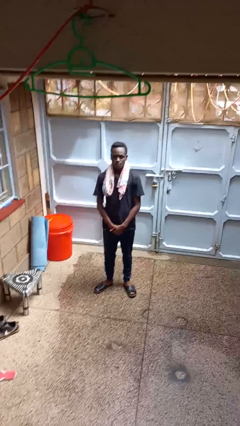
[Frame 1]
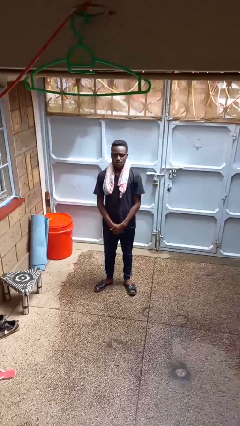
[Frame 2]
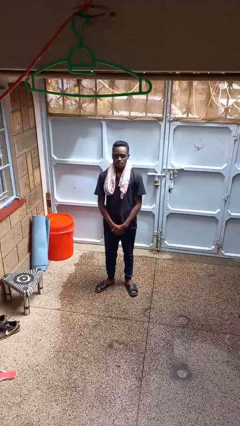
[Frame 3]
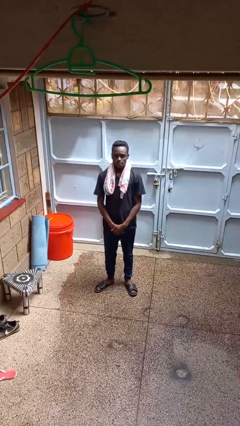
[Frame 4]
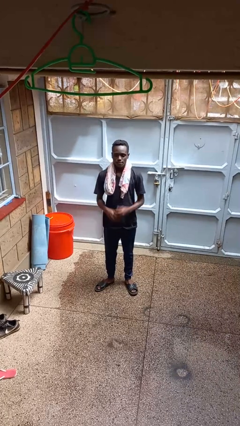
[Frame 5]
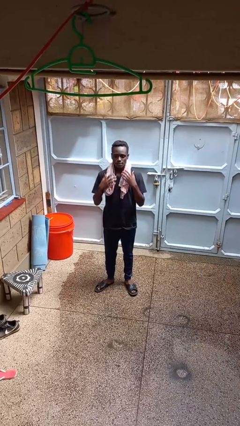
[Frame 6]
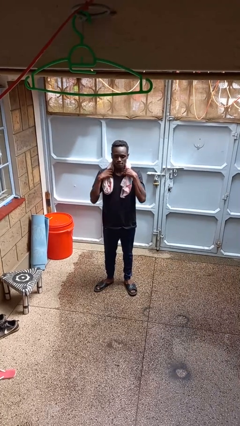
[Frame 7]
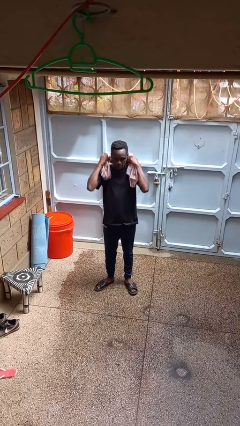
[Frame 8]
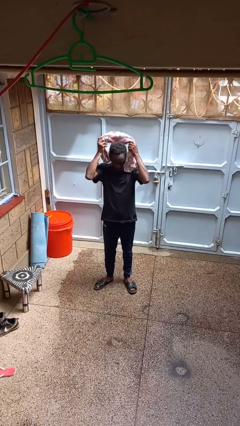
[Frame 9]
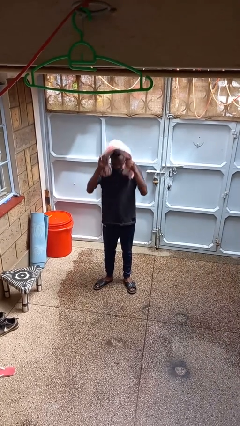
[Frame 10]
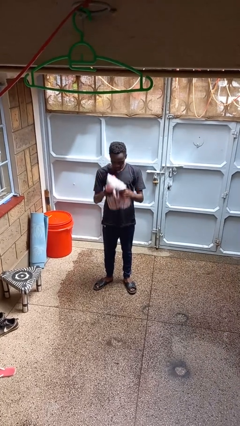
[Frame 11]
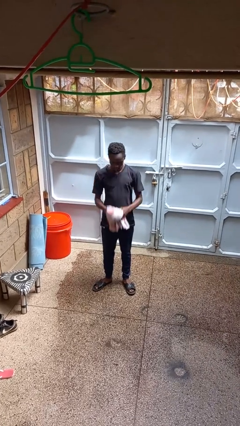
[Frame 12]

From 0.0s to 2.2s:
person takes off scarf

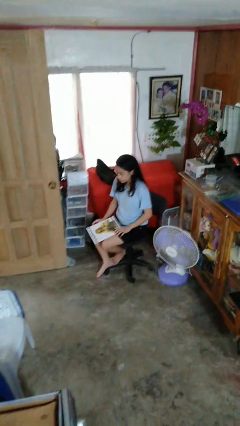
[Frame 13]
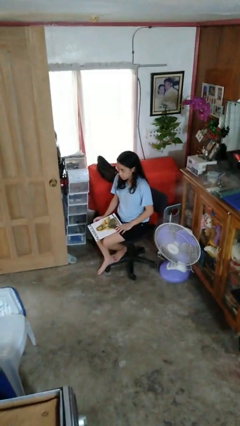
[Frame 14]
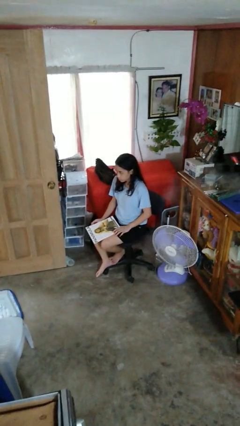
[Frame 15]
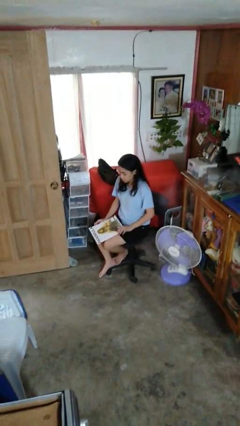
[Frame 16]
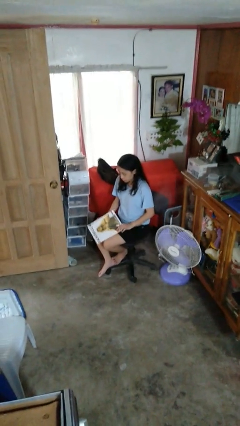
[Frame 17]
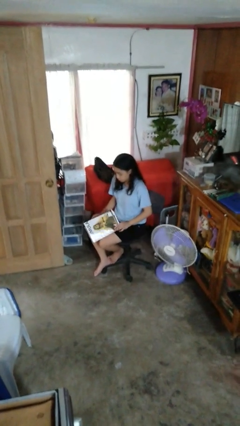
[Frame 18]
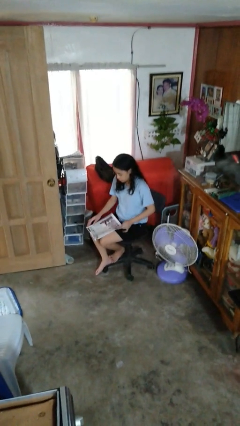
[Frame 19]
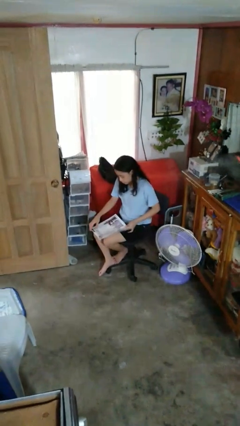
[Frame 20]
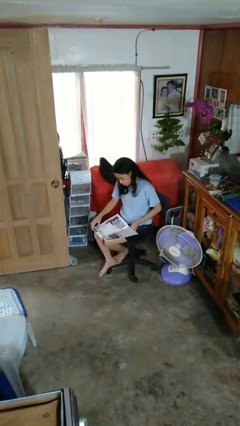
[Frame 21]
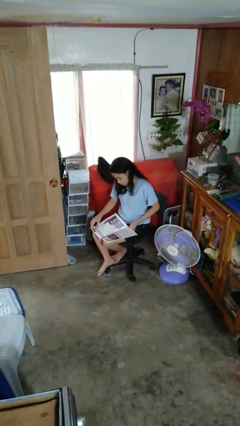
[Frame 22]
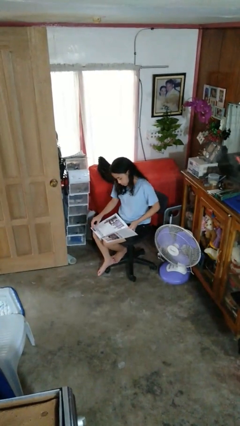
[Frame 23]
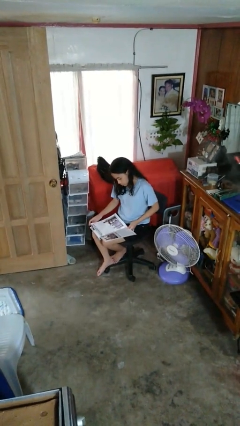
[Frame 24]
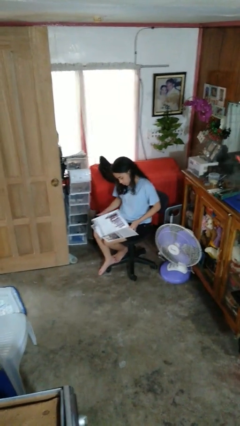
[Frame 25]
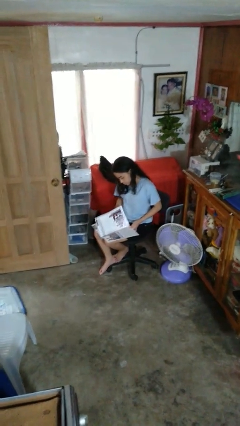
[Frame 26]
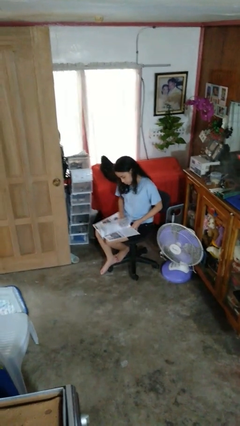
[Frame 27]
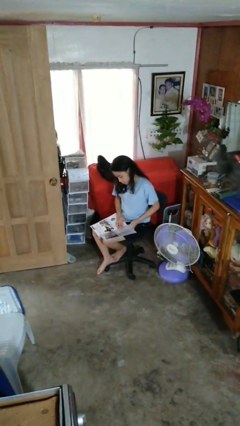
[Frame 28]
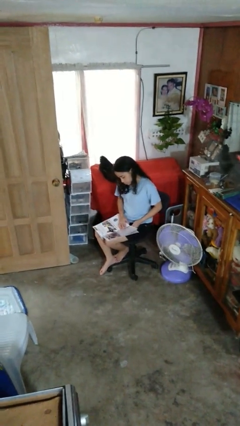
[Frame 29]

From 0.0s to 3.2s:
person reads magazine

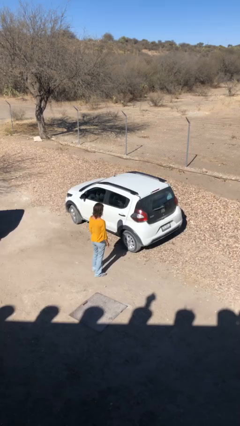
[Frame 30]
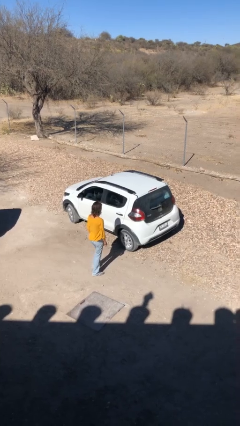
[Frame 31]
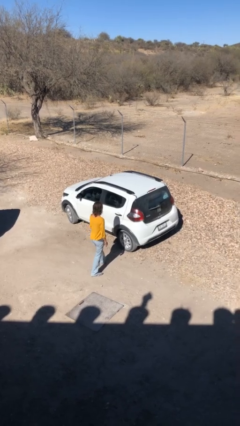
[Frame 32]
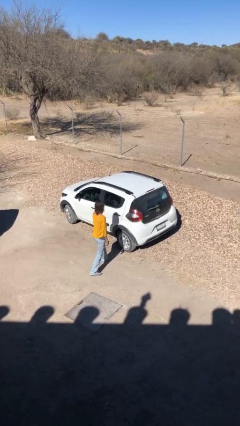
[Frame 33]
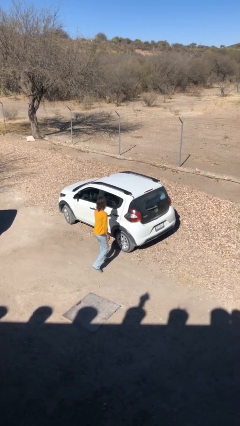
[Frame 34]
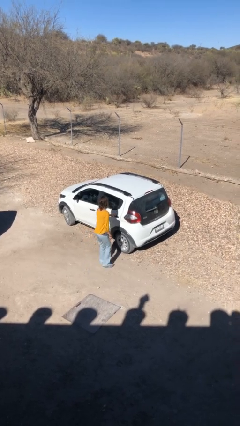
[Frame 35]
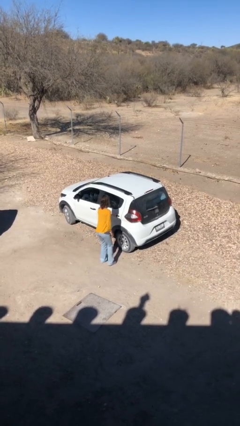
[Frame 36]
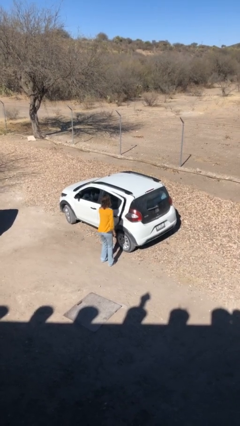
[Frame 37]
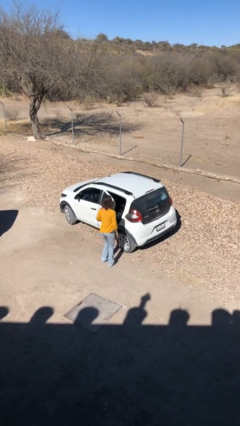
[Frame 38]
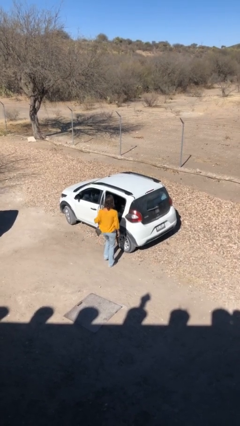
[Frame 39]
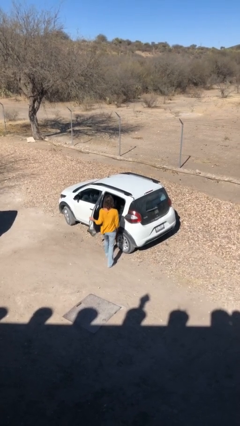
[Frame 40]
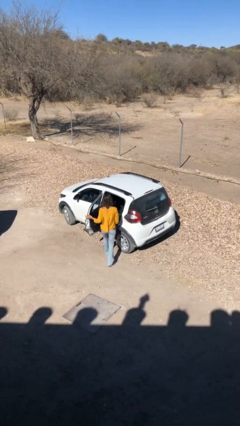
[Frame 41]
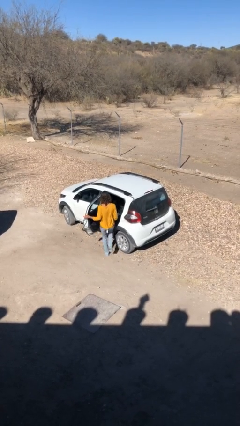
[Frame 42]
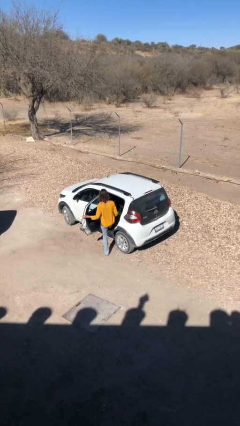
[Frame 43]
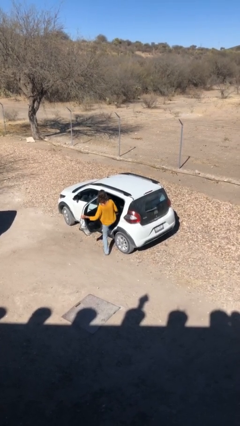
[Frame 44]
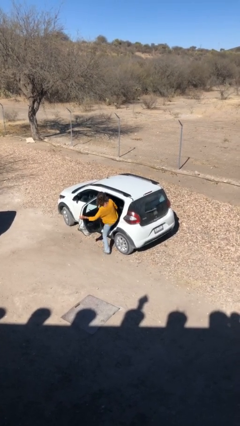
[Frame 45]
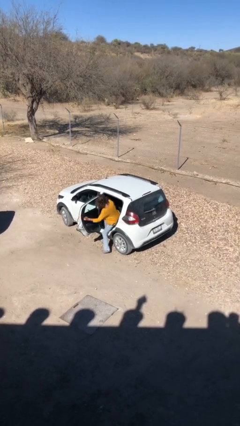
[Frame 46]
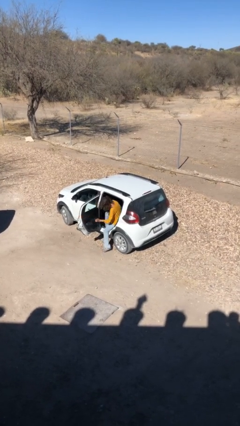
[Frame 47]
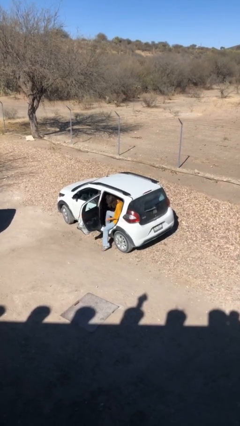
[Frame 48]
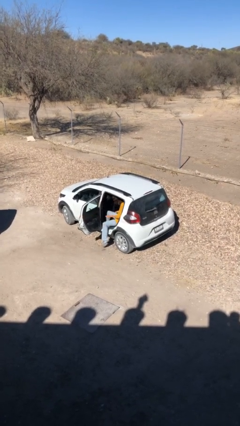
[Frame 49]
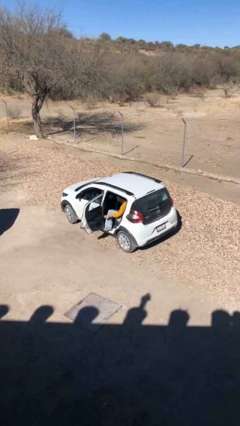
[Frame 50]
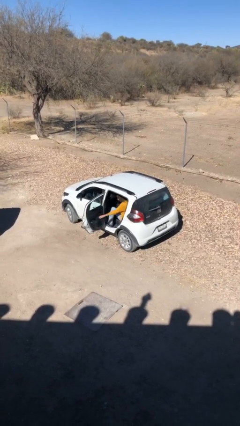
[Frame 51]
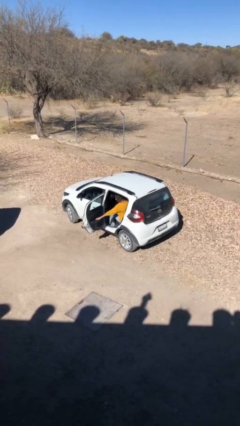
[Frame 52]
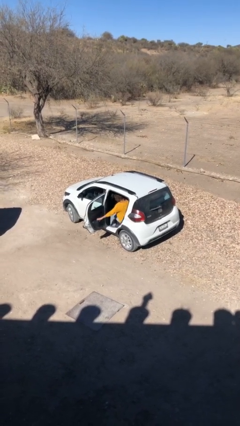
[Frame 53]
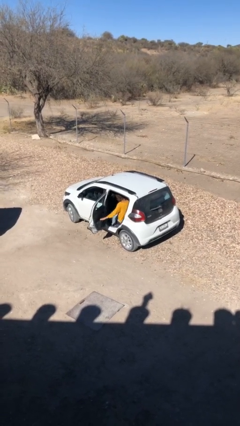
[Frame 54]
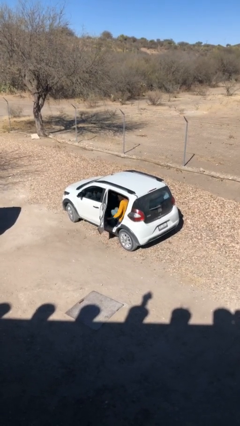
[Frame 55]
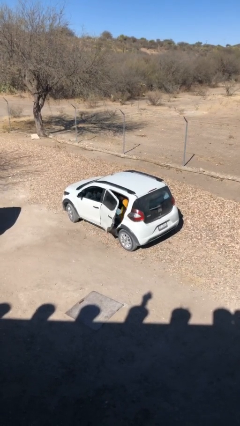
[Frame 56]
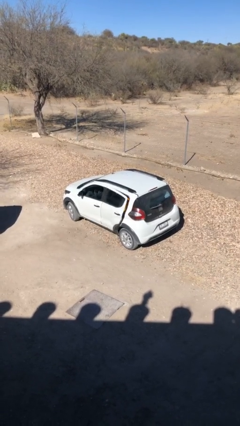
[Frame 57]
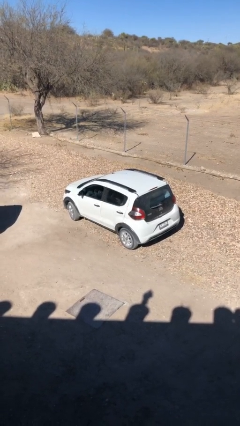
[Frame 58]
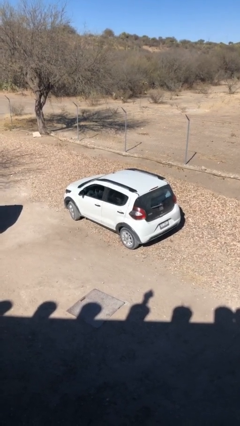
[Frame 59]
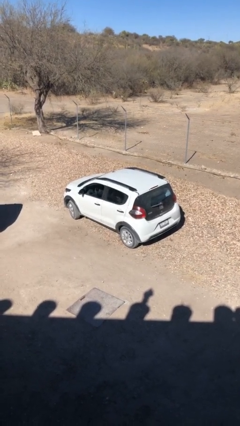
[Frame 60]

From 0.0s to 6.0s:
car picks up person

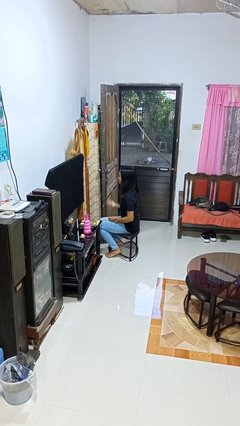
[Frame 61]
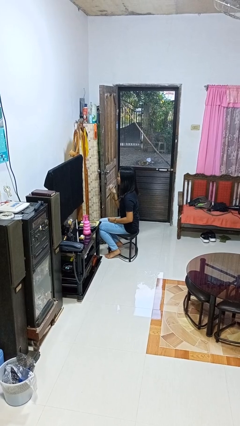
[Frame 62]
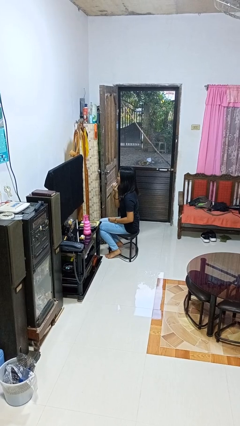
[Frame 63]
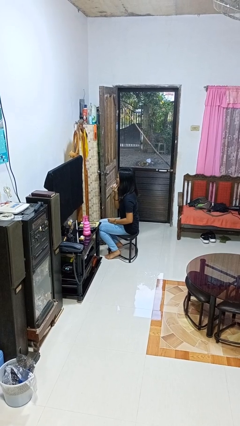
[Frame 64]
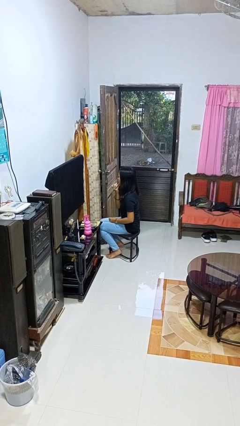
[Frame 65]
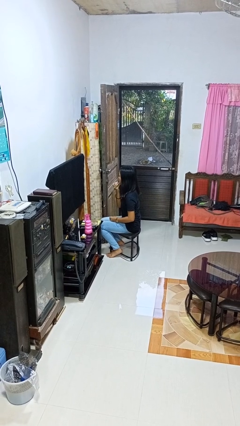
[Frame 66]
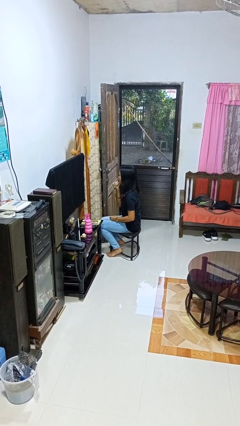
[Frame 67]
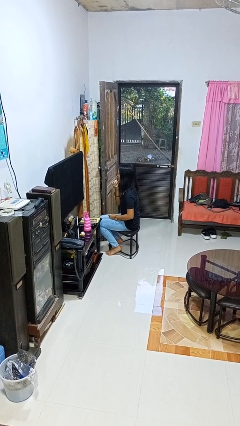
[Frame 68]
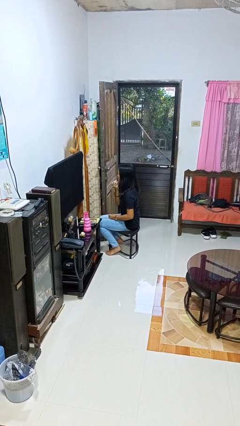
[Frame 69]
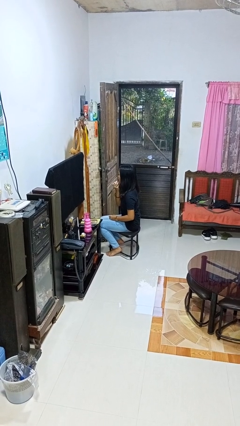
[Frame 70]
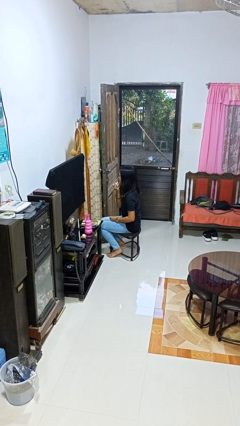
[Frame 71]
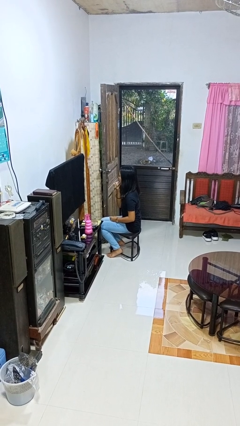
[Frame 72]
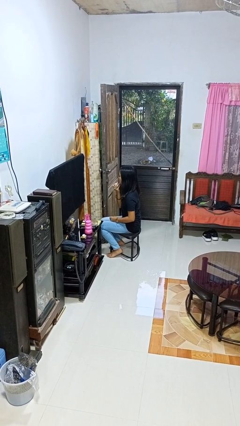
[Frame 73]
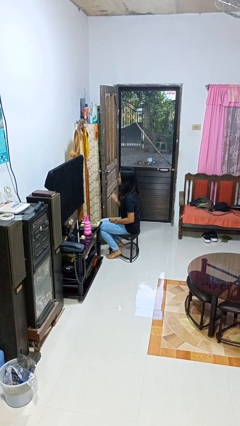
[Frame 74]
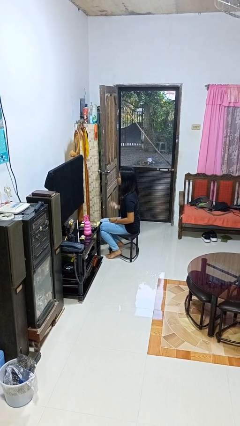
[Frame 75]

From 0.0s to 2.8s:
person applies lip makeup

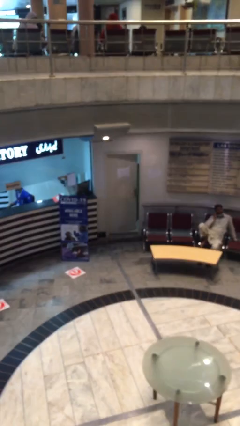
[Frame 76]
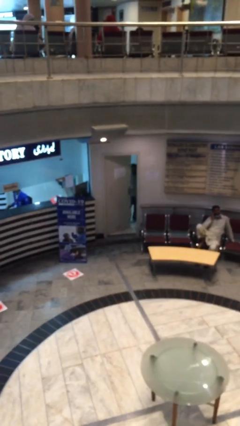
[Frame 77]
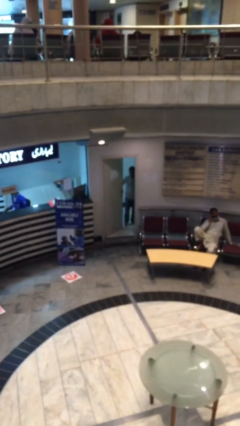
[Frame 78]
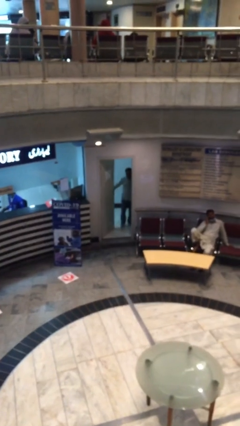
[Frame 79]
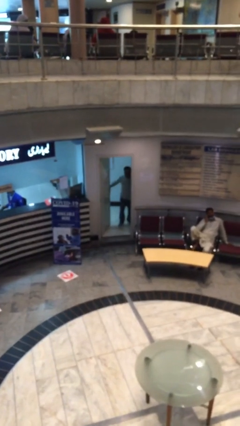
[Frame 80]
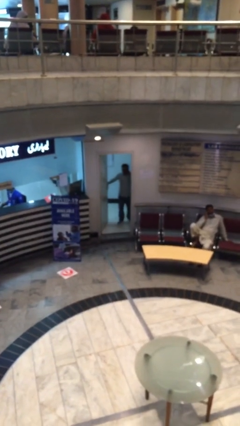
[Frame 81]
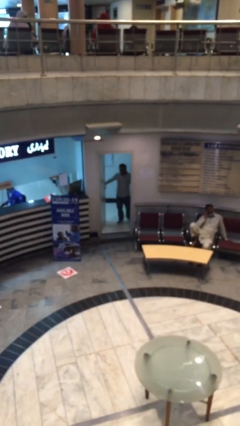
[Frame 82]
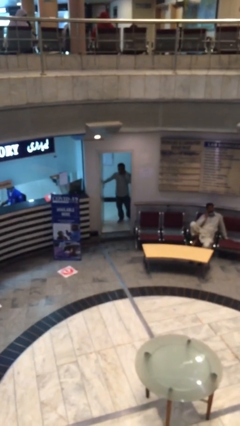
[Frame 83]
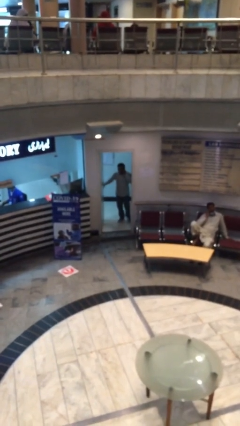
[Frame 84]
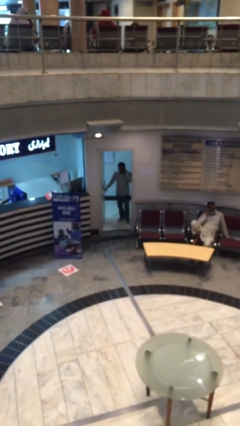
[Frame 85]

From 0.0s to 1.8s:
person opens facility door

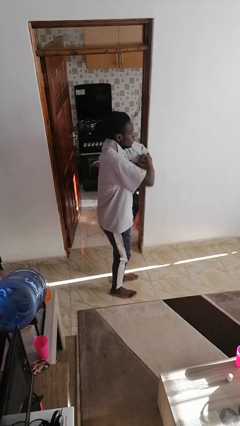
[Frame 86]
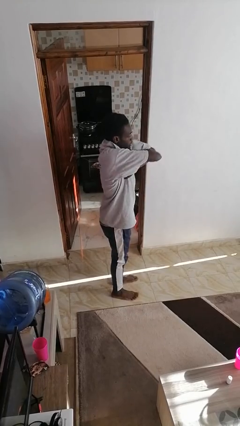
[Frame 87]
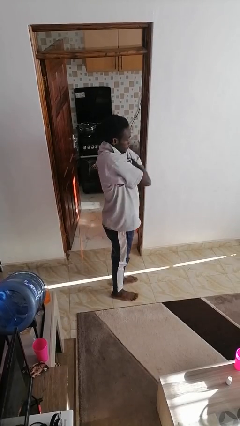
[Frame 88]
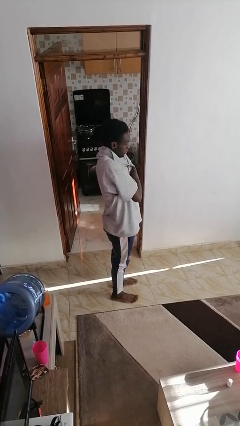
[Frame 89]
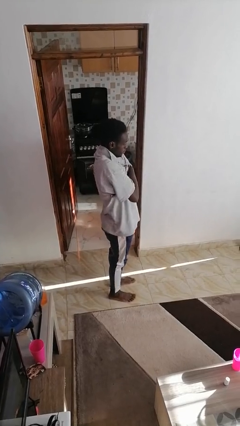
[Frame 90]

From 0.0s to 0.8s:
person crosses arms

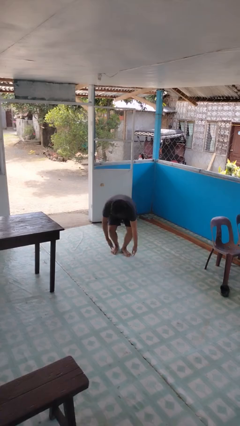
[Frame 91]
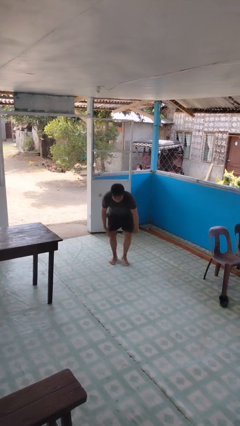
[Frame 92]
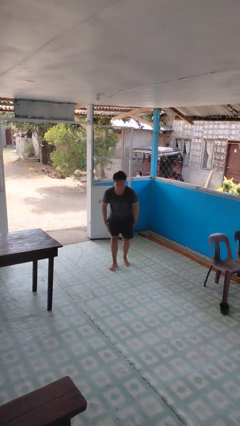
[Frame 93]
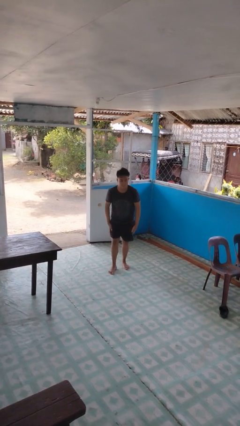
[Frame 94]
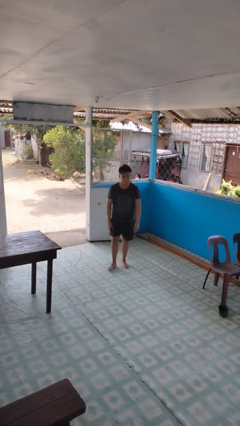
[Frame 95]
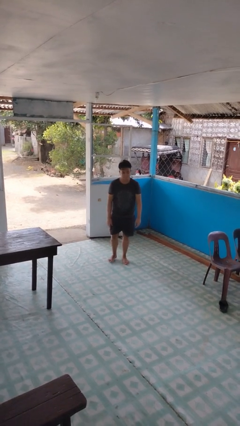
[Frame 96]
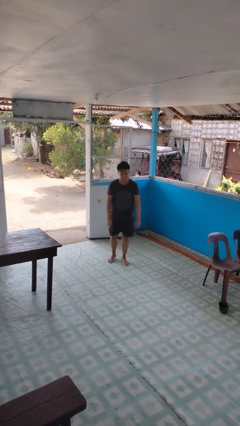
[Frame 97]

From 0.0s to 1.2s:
person stands up from floor
